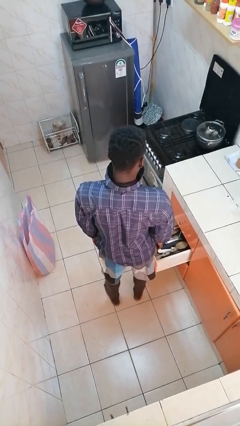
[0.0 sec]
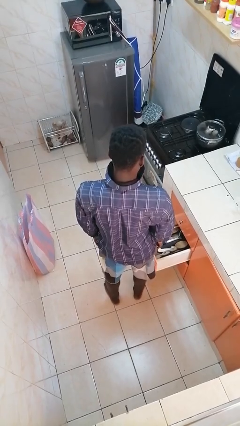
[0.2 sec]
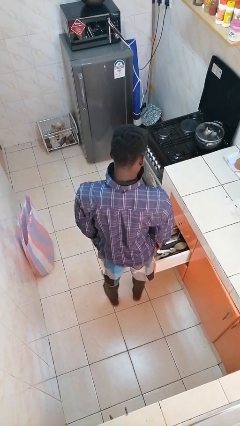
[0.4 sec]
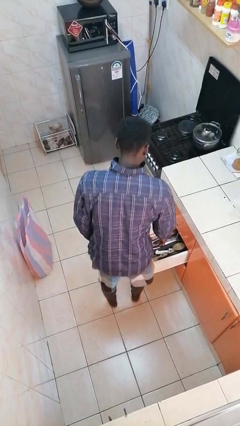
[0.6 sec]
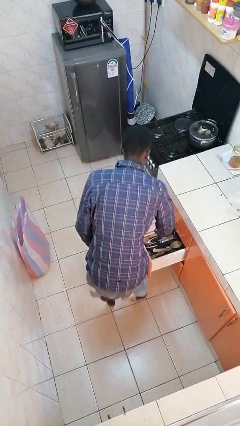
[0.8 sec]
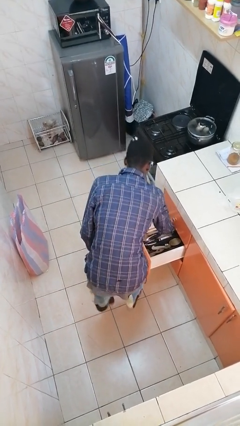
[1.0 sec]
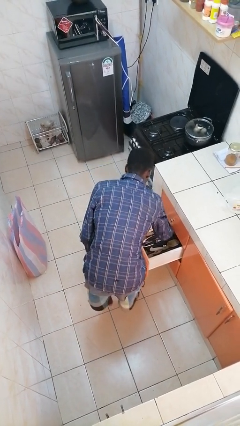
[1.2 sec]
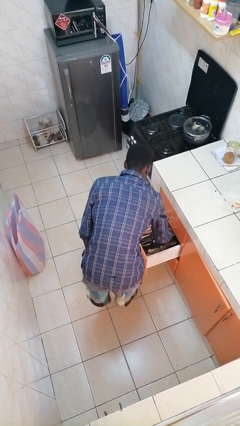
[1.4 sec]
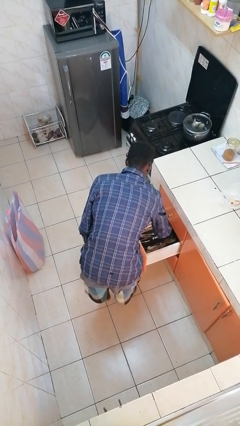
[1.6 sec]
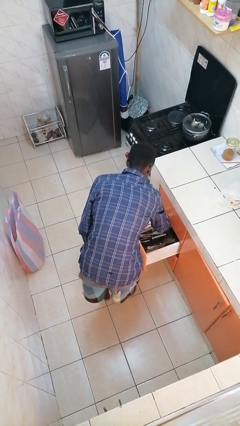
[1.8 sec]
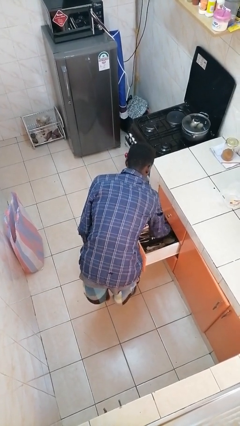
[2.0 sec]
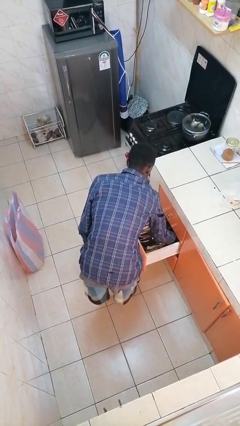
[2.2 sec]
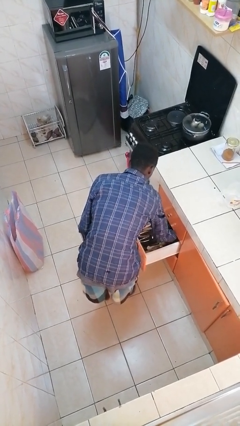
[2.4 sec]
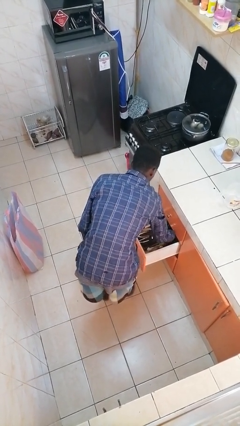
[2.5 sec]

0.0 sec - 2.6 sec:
person searches in kitchen drawer

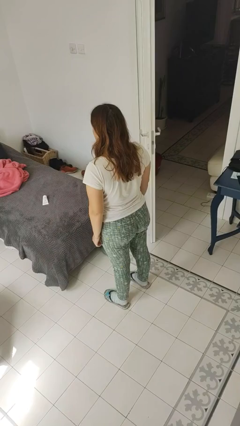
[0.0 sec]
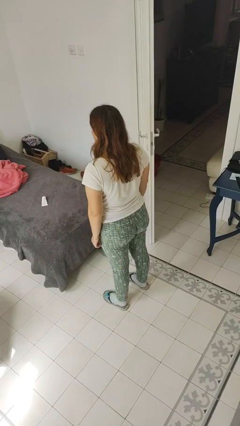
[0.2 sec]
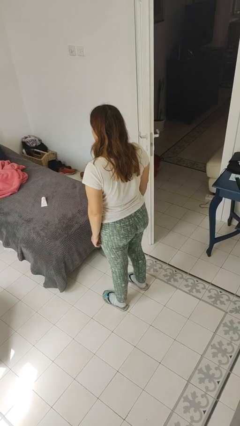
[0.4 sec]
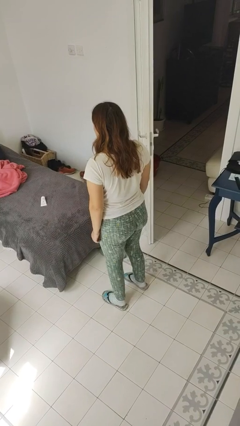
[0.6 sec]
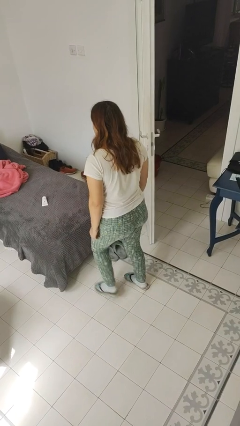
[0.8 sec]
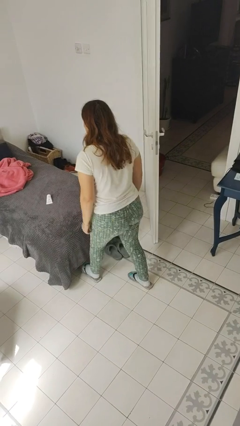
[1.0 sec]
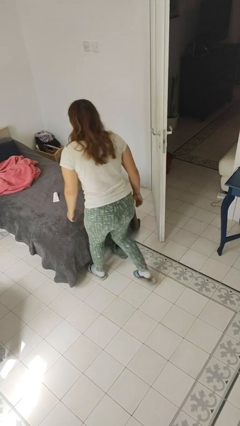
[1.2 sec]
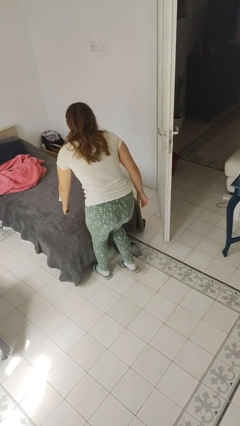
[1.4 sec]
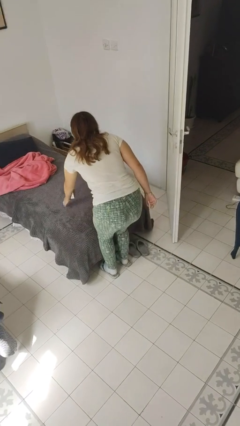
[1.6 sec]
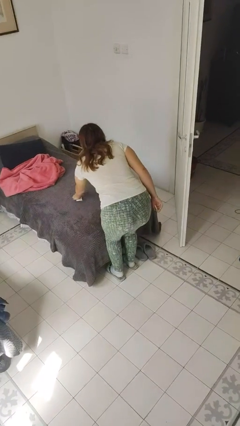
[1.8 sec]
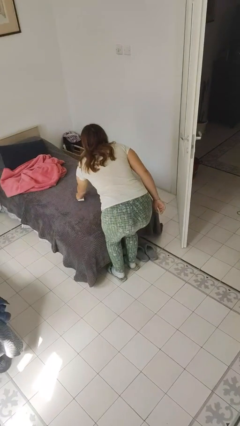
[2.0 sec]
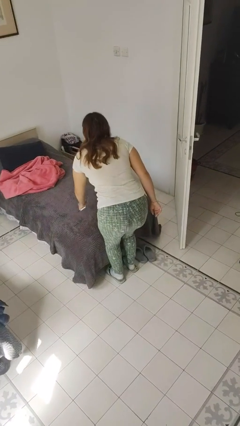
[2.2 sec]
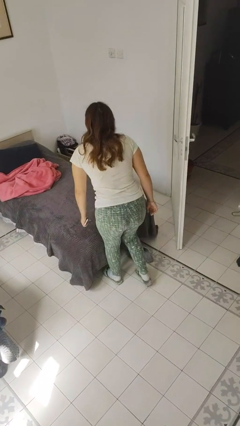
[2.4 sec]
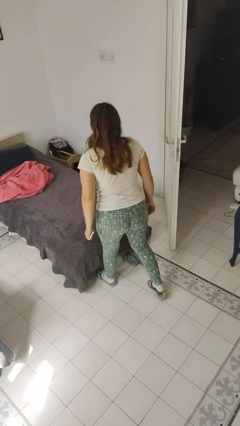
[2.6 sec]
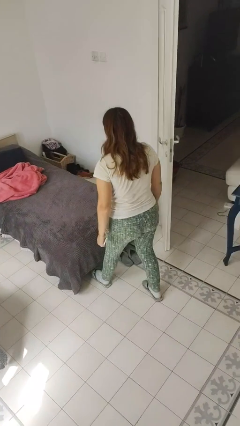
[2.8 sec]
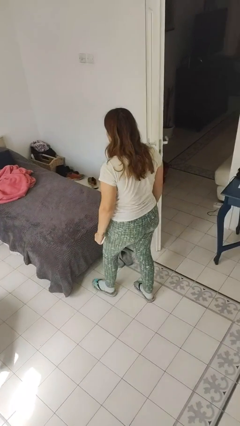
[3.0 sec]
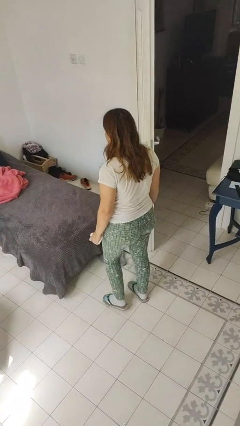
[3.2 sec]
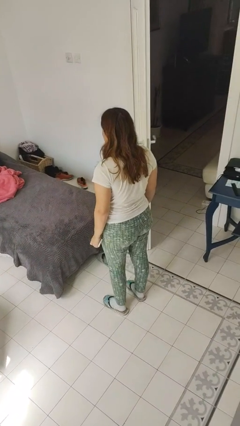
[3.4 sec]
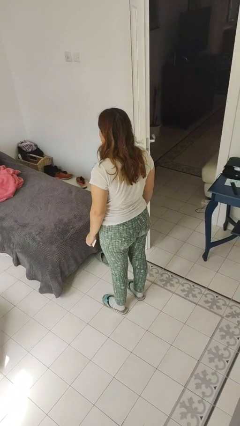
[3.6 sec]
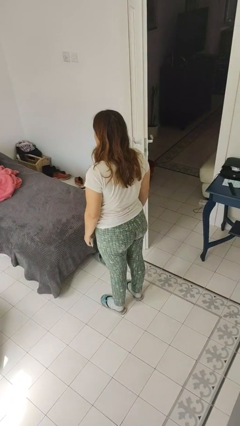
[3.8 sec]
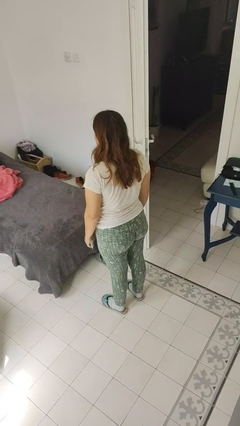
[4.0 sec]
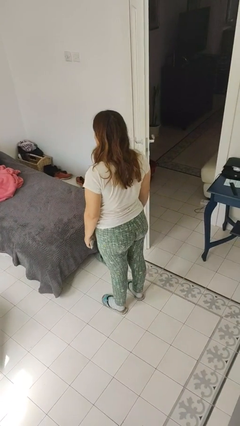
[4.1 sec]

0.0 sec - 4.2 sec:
person picks up object from bed

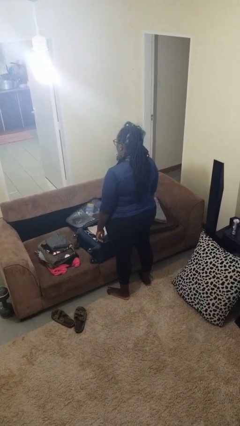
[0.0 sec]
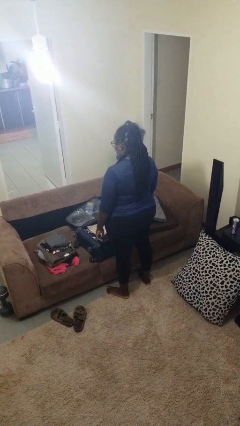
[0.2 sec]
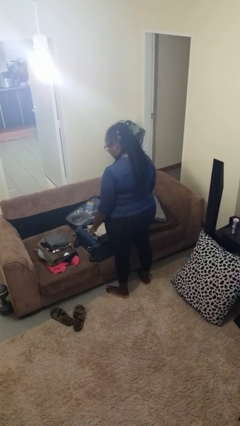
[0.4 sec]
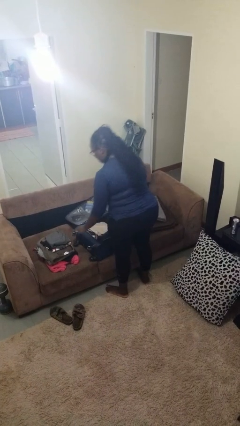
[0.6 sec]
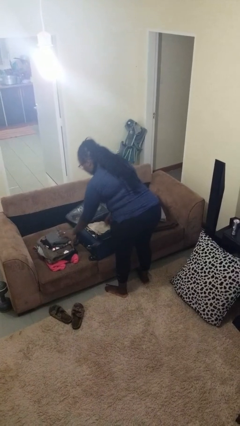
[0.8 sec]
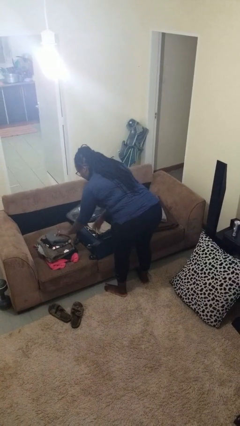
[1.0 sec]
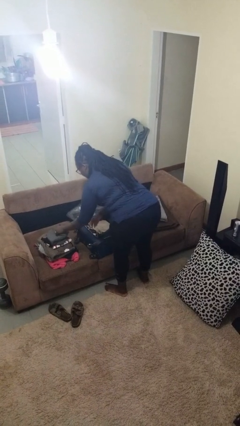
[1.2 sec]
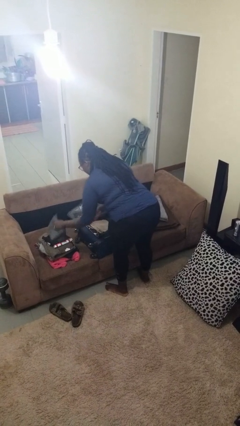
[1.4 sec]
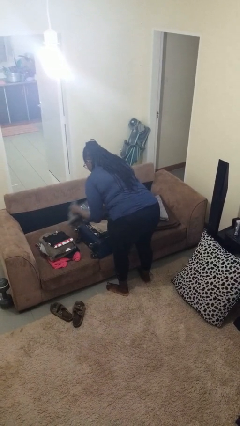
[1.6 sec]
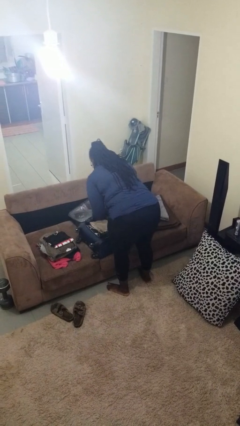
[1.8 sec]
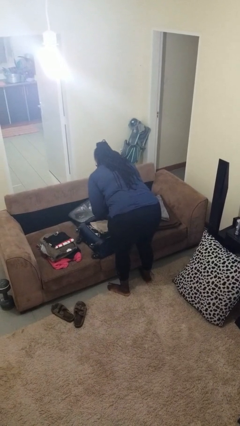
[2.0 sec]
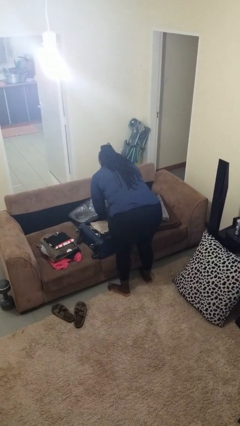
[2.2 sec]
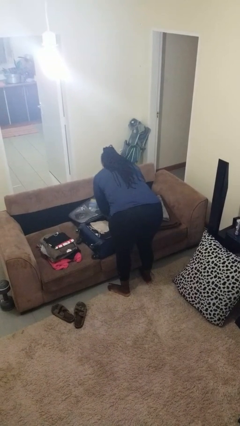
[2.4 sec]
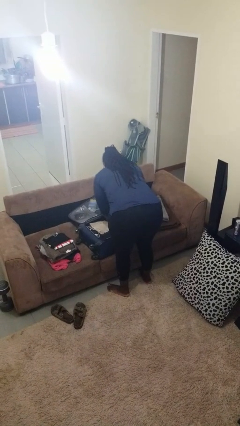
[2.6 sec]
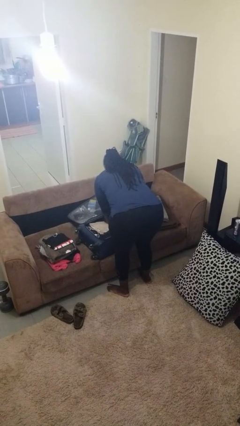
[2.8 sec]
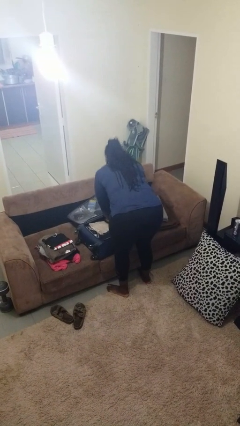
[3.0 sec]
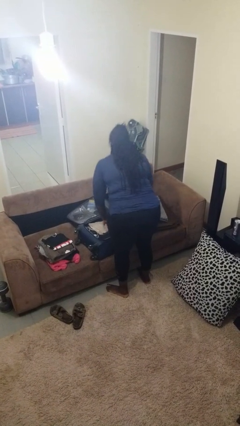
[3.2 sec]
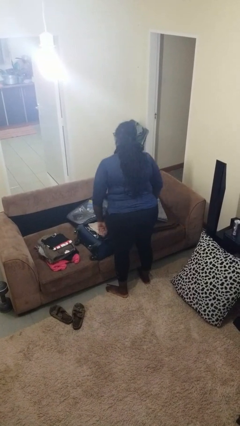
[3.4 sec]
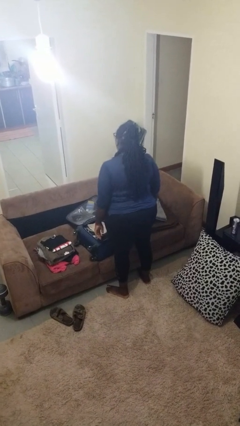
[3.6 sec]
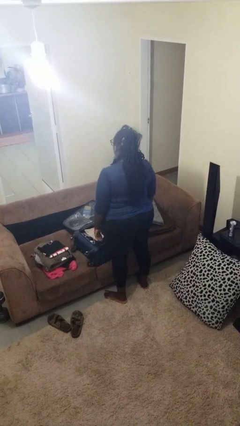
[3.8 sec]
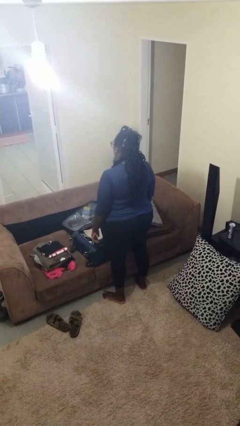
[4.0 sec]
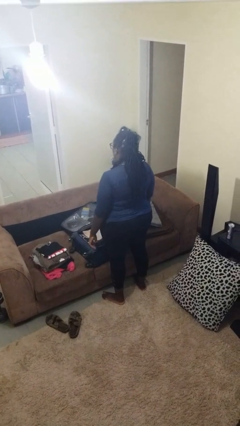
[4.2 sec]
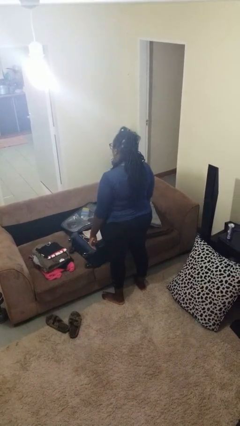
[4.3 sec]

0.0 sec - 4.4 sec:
person loads clothes into suitcase

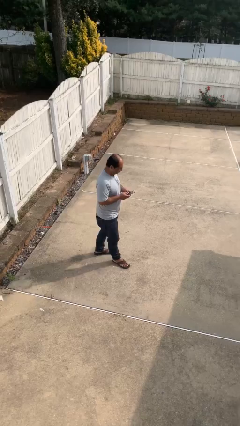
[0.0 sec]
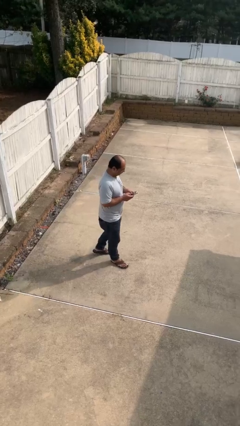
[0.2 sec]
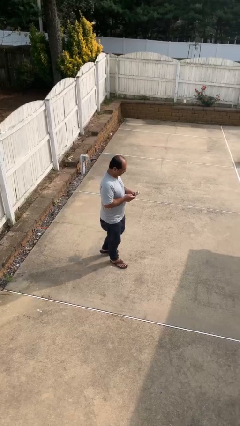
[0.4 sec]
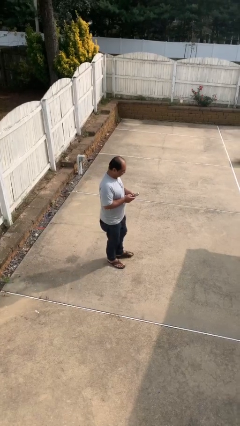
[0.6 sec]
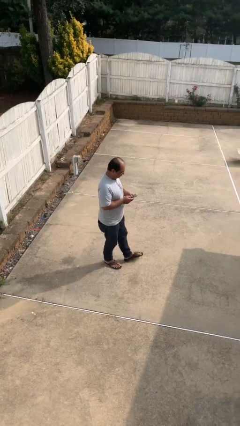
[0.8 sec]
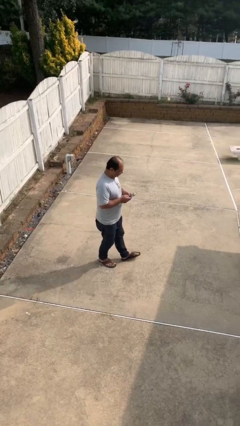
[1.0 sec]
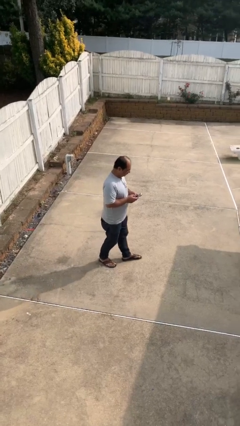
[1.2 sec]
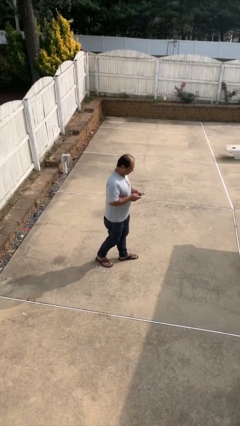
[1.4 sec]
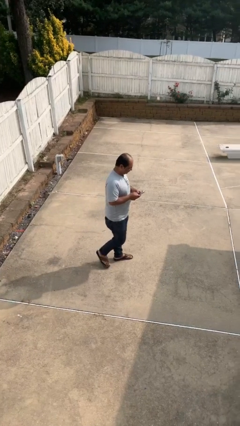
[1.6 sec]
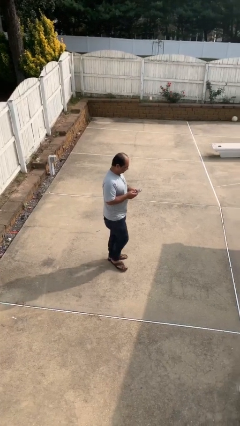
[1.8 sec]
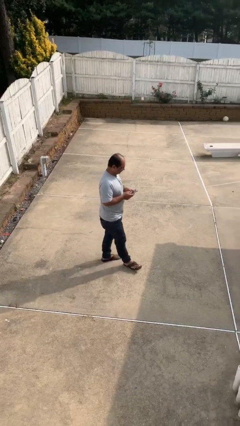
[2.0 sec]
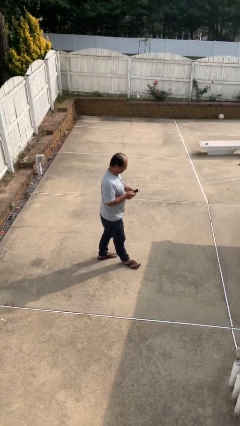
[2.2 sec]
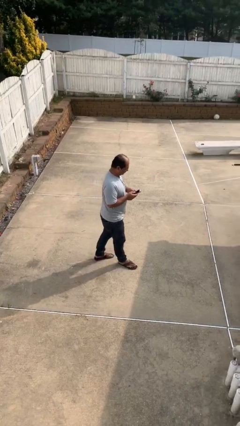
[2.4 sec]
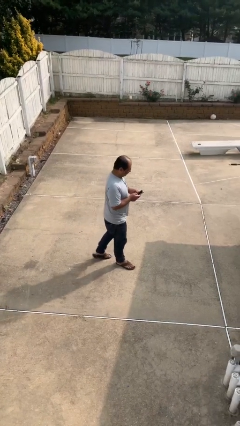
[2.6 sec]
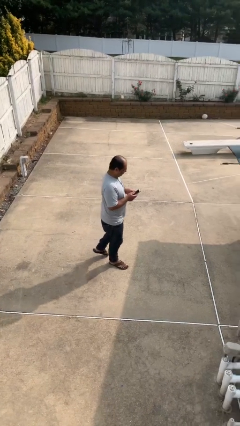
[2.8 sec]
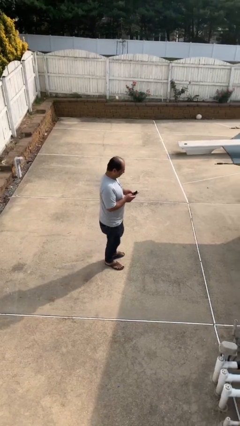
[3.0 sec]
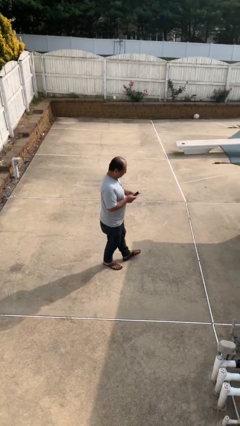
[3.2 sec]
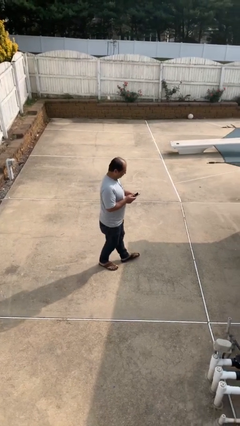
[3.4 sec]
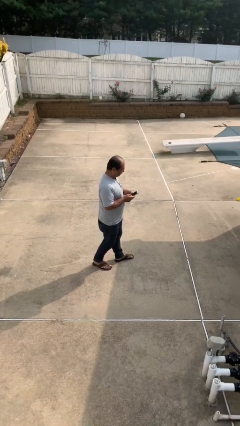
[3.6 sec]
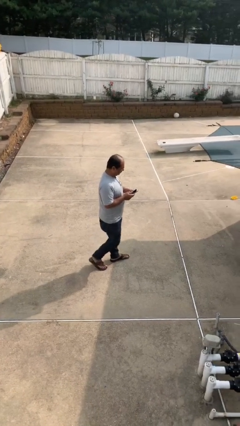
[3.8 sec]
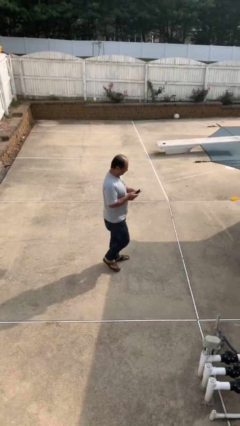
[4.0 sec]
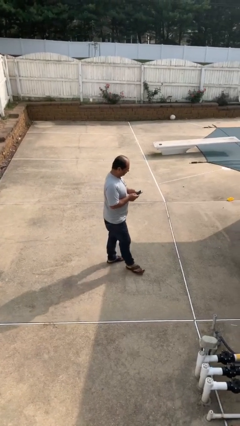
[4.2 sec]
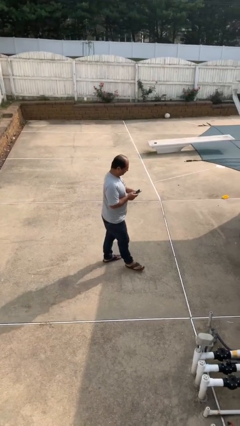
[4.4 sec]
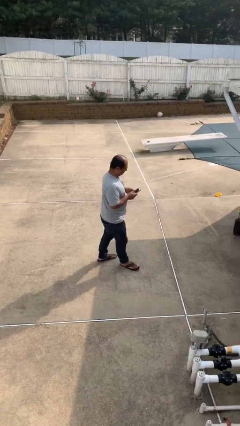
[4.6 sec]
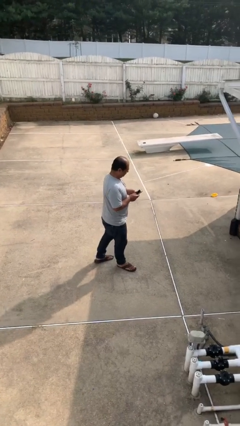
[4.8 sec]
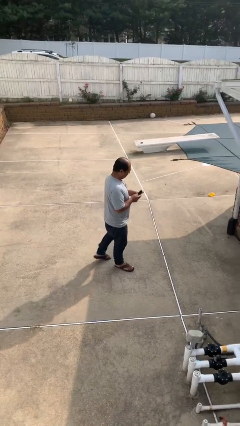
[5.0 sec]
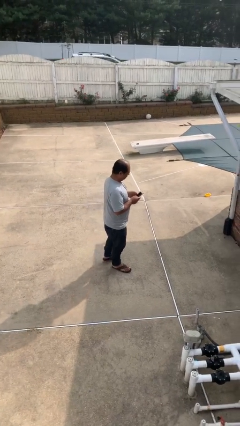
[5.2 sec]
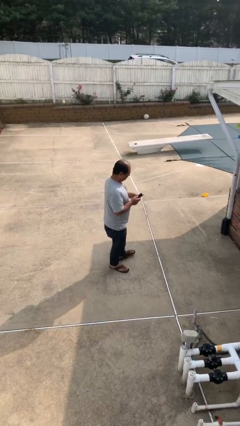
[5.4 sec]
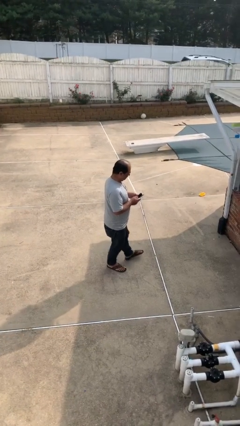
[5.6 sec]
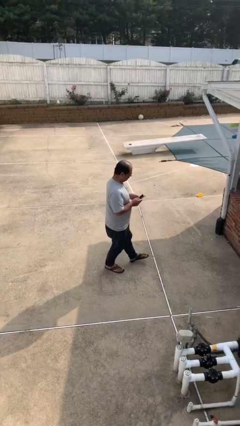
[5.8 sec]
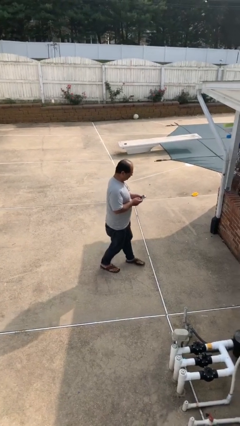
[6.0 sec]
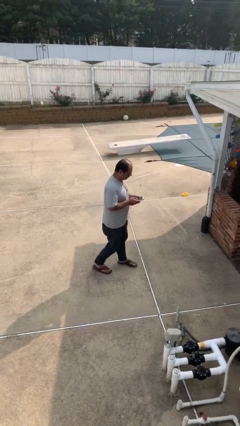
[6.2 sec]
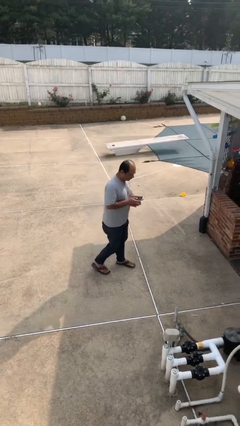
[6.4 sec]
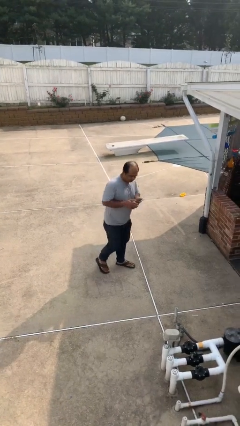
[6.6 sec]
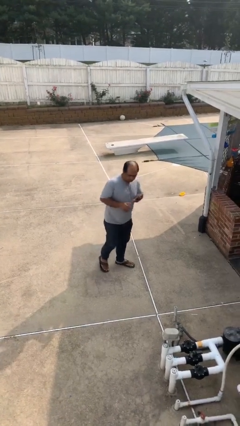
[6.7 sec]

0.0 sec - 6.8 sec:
person texts on phone
